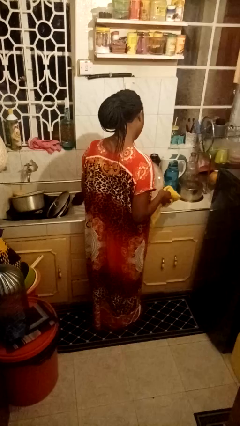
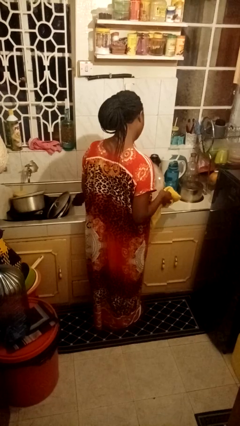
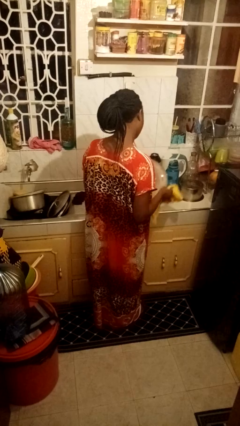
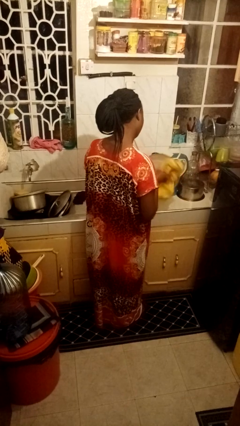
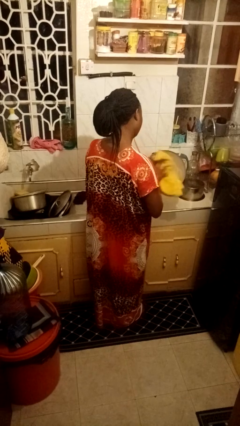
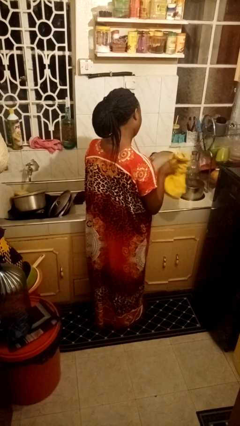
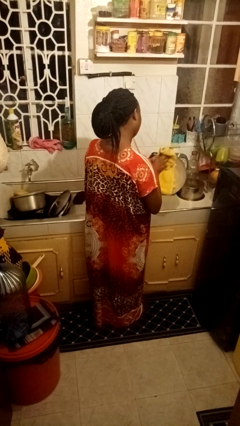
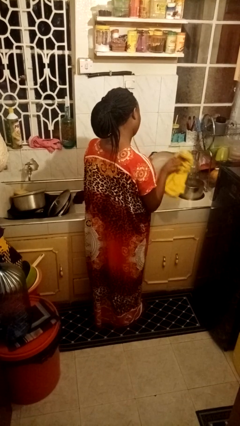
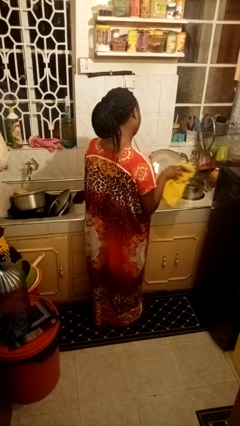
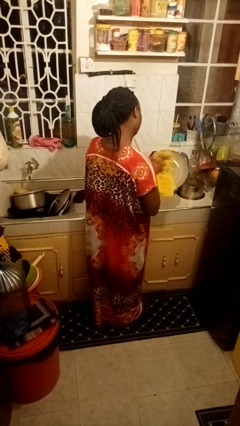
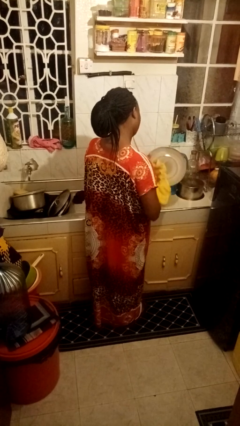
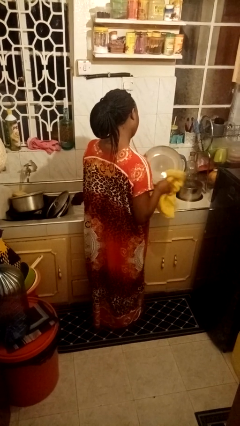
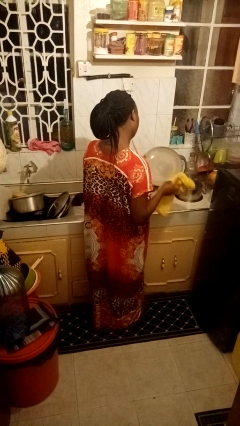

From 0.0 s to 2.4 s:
person dries dish

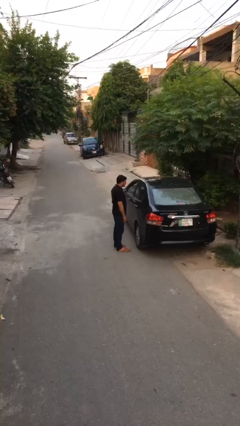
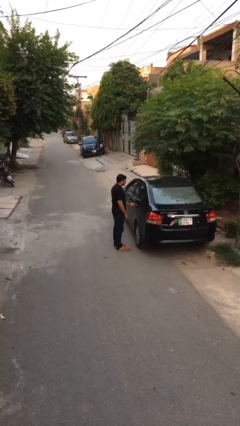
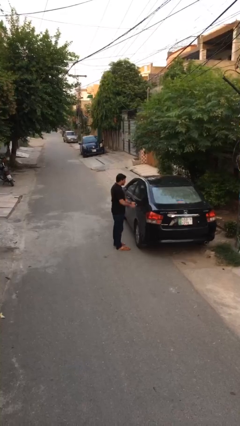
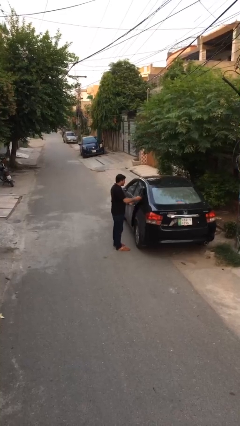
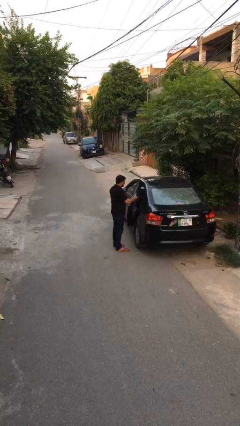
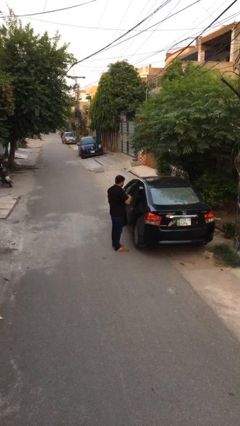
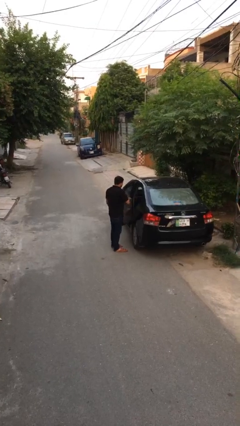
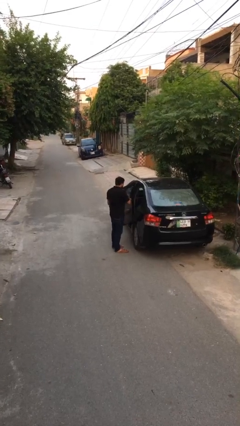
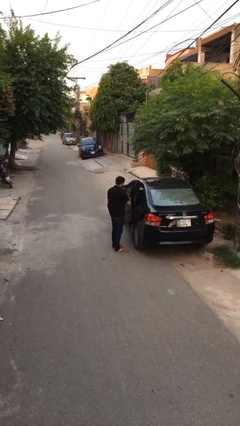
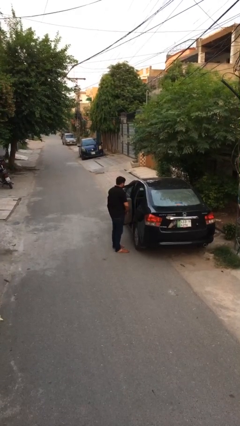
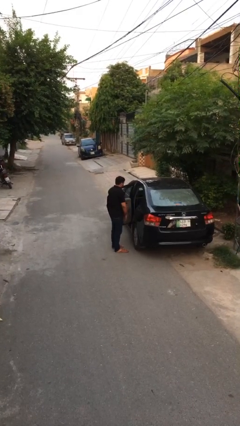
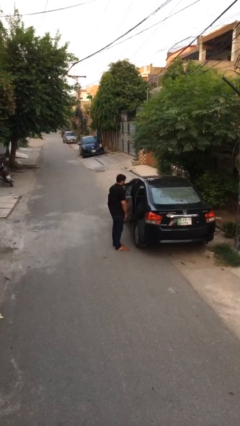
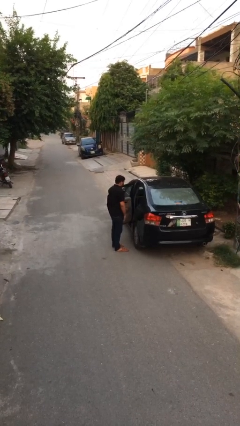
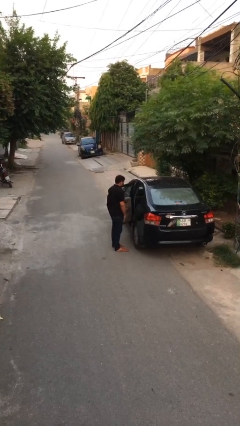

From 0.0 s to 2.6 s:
person opens car door

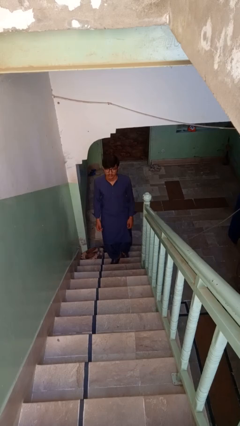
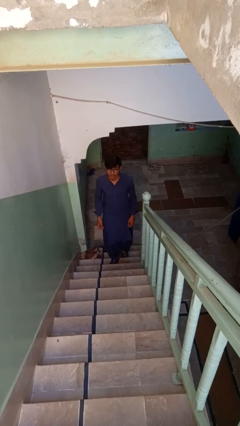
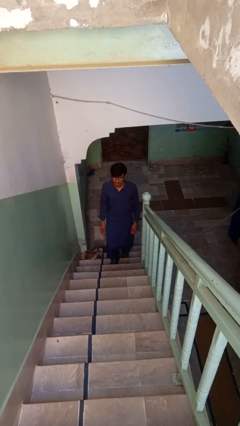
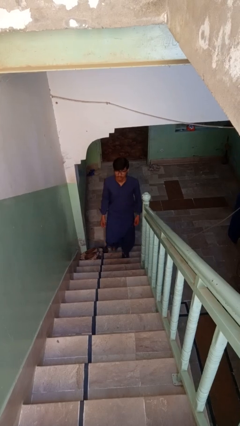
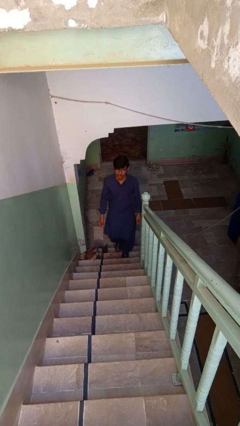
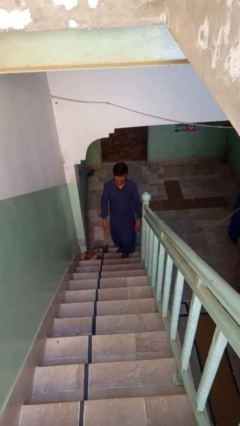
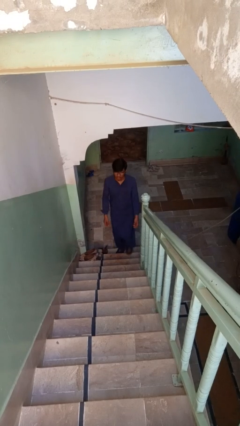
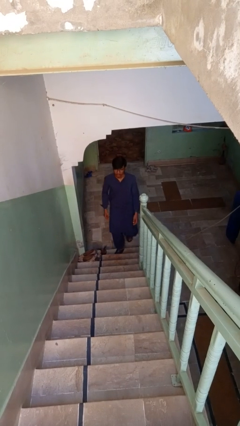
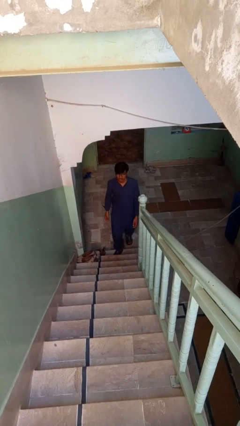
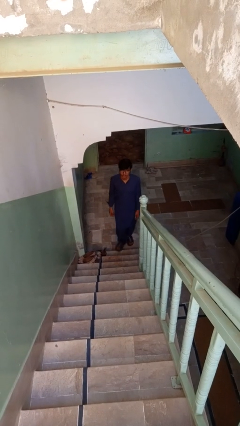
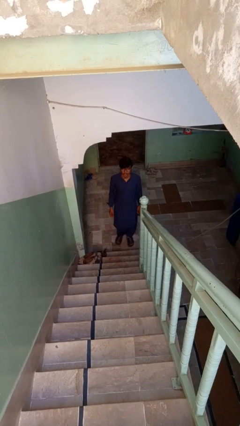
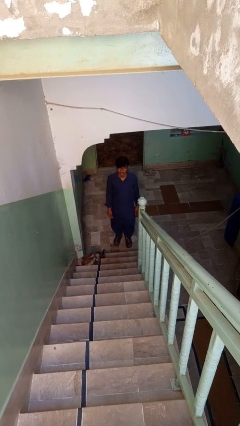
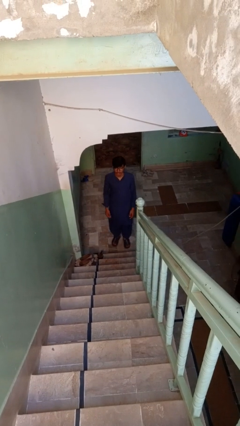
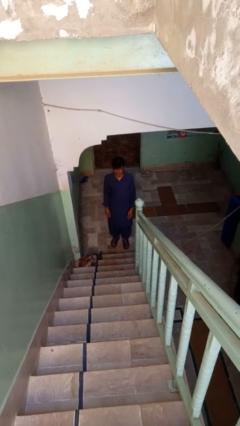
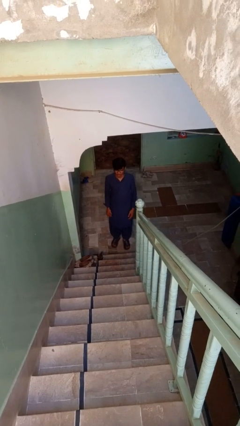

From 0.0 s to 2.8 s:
person climbs down stairs

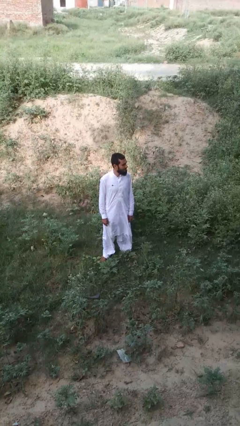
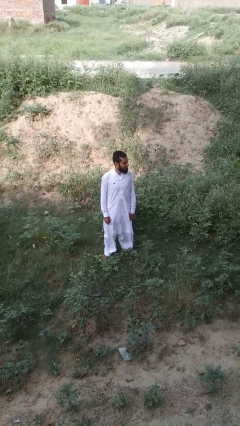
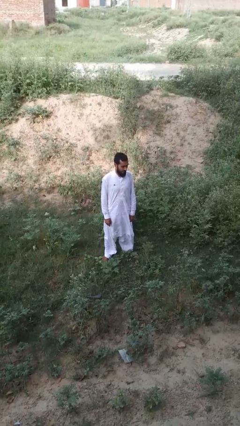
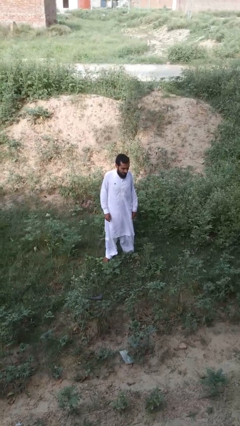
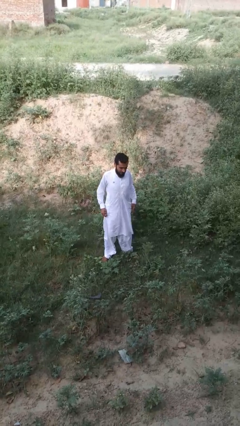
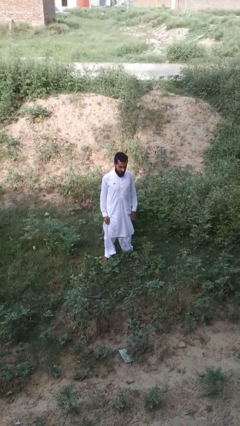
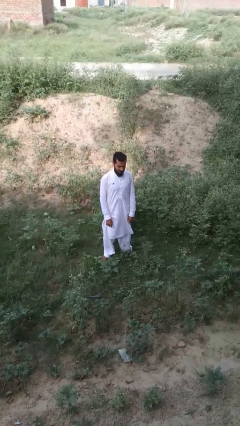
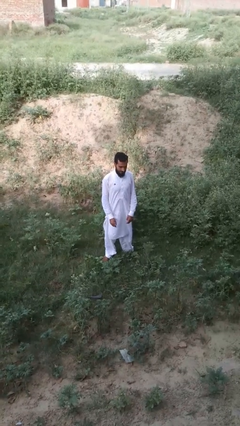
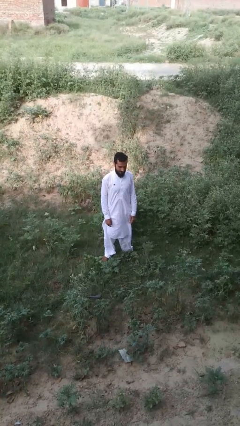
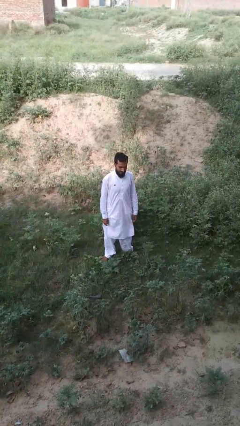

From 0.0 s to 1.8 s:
person shrugs

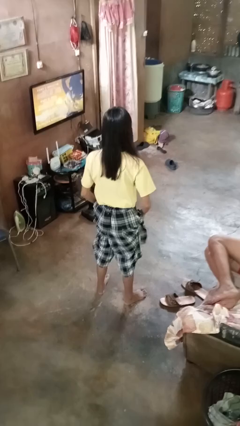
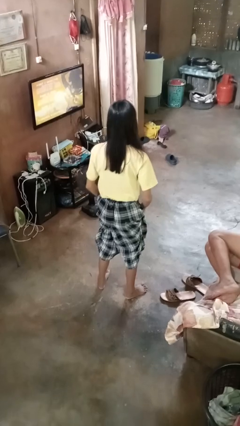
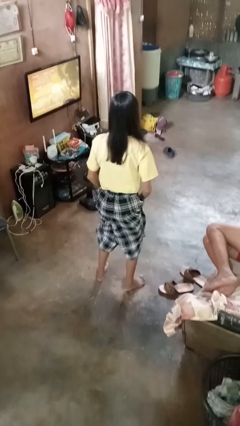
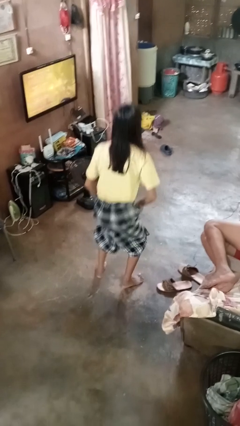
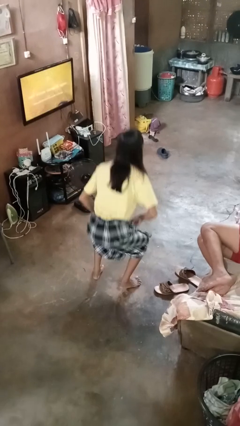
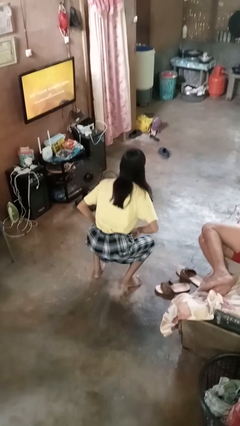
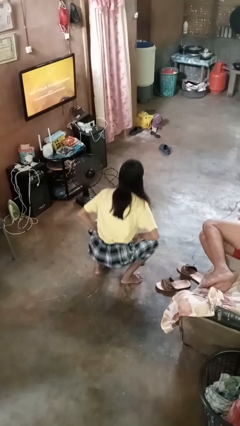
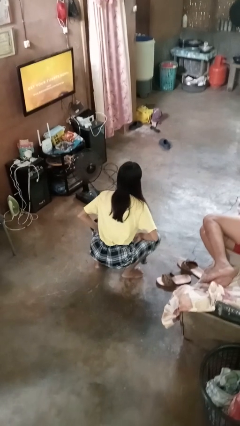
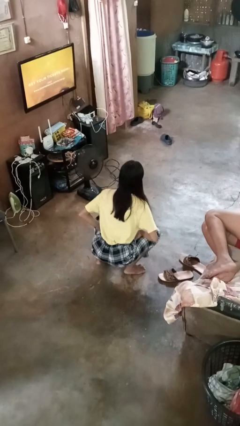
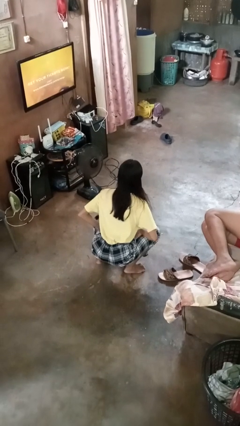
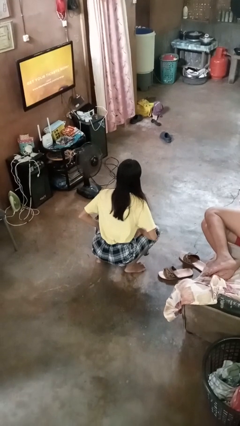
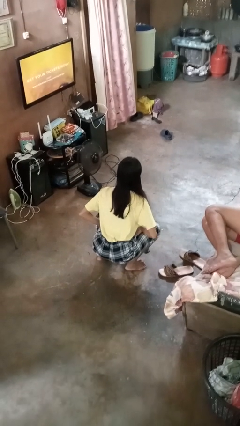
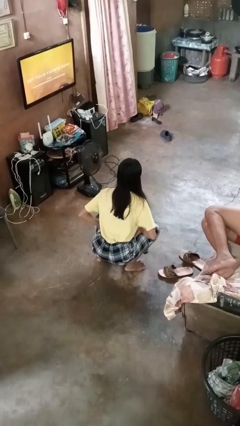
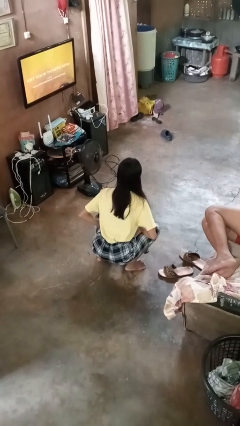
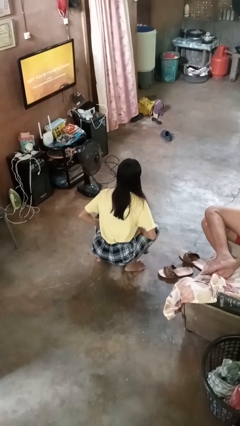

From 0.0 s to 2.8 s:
person squats

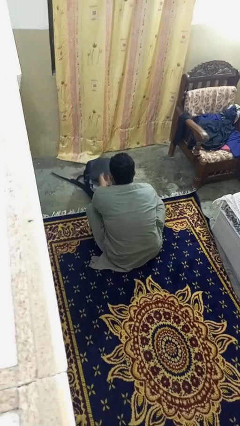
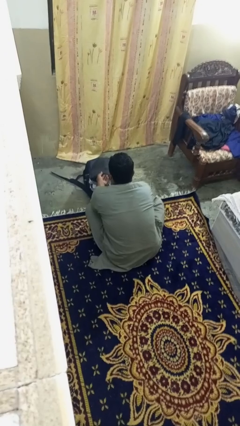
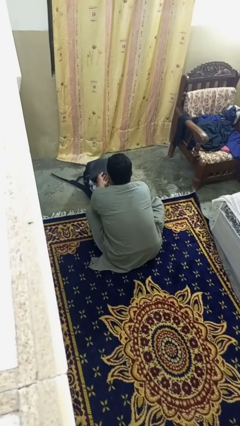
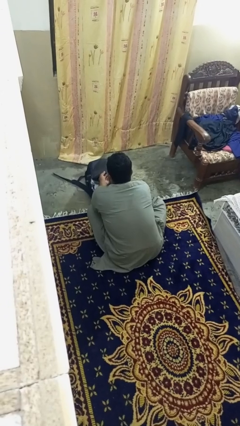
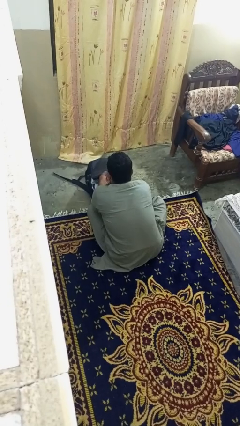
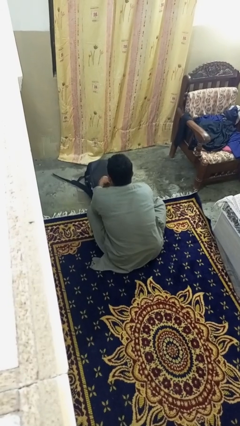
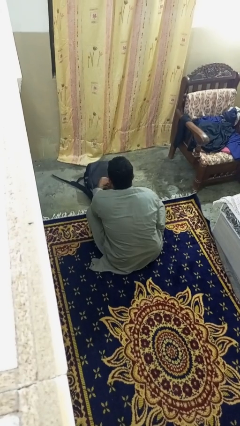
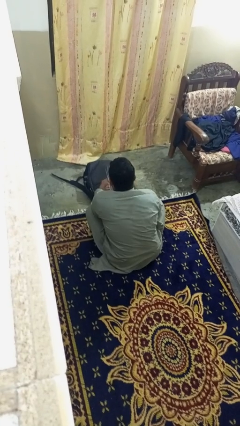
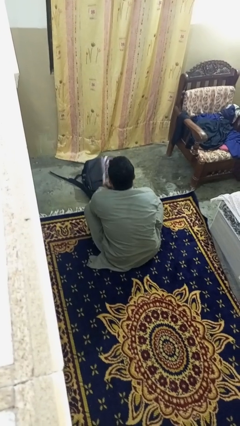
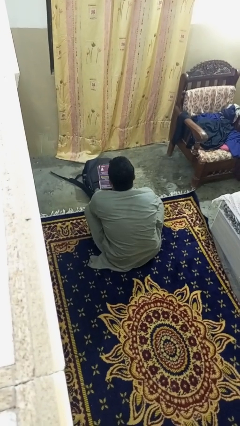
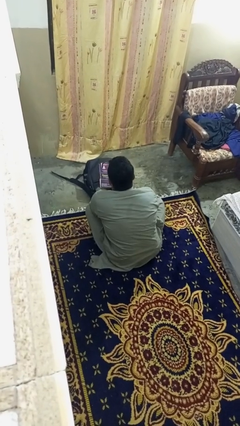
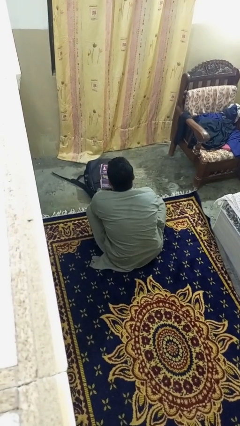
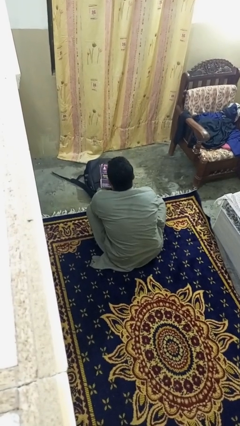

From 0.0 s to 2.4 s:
person takes object from bag

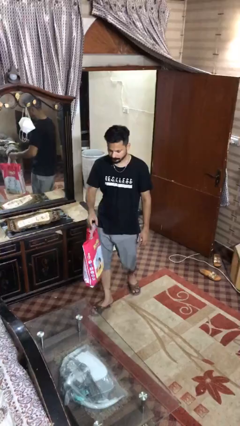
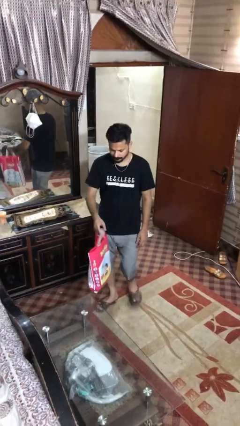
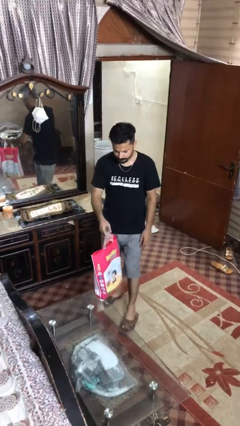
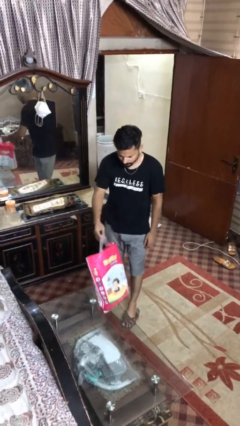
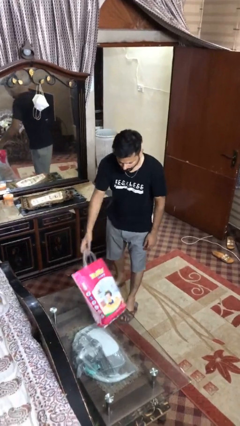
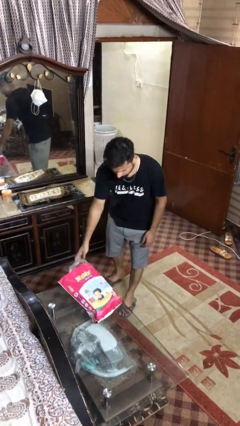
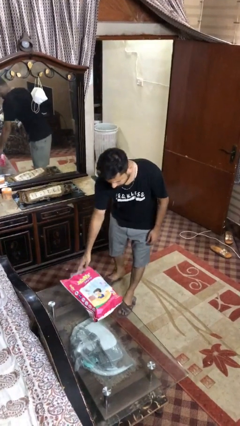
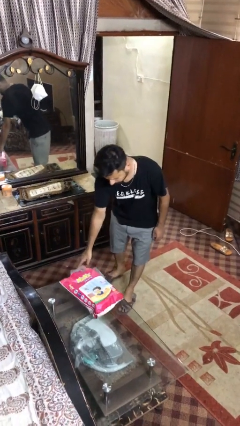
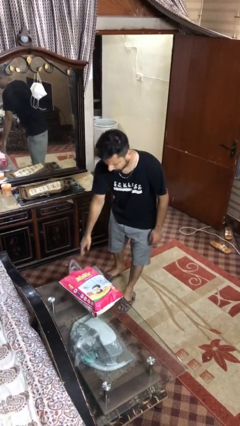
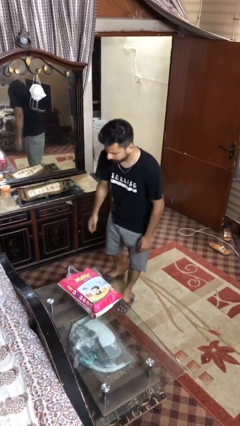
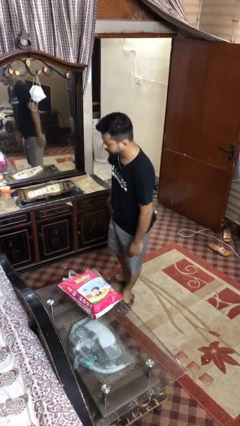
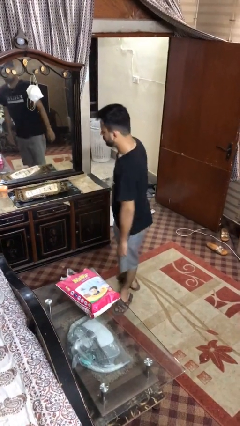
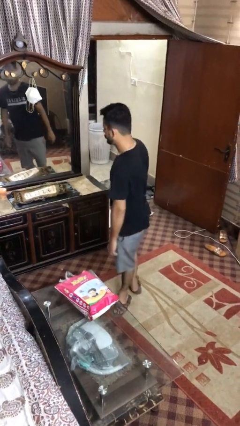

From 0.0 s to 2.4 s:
person puts down object on table
